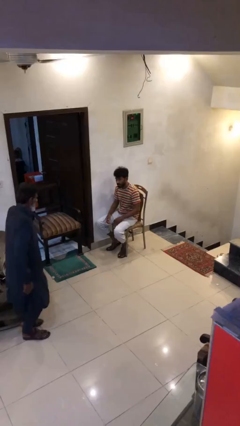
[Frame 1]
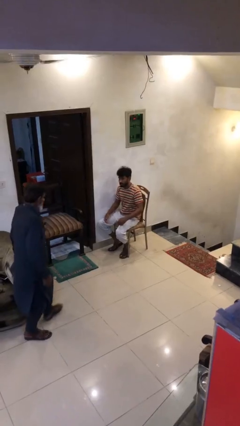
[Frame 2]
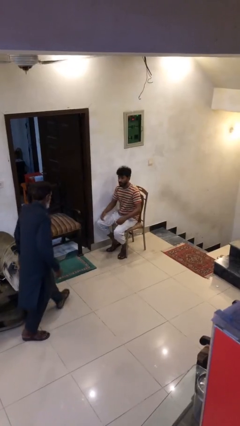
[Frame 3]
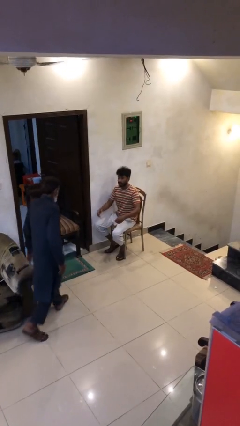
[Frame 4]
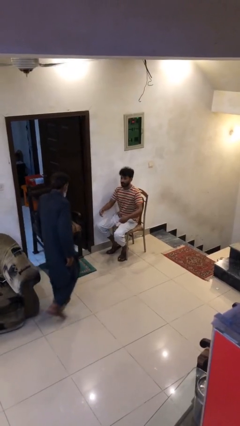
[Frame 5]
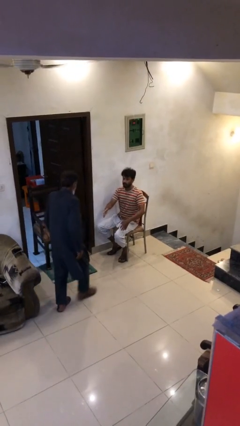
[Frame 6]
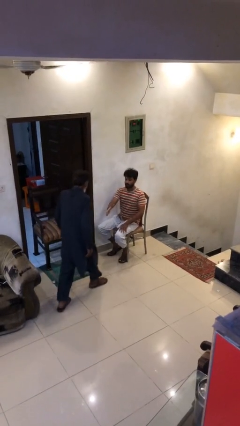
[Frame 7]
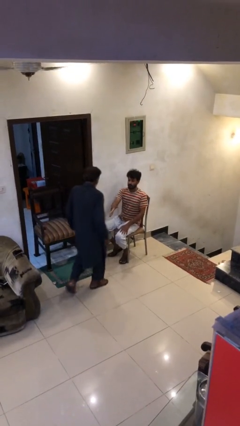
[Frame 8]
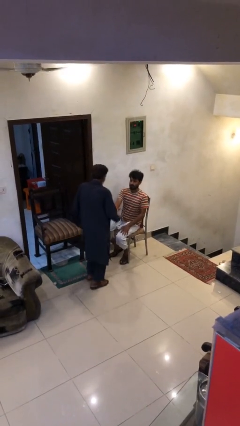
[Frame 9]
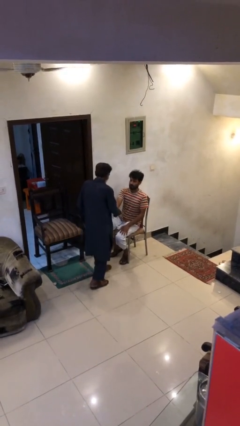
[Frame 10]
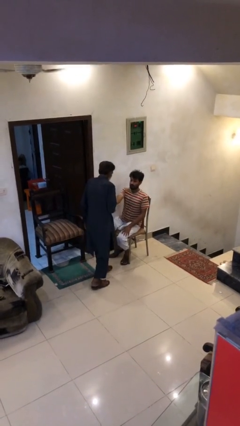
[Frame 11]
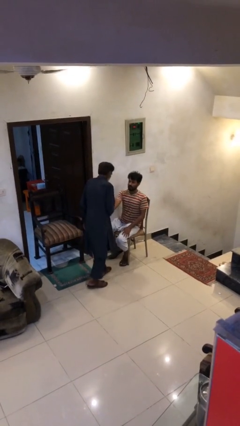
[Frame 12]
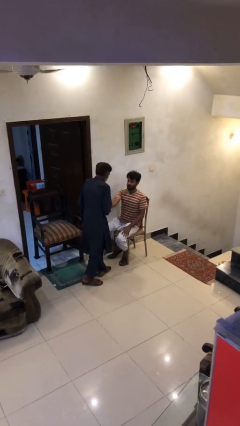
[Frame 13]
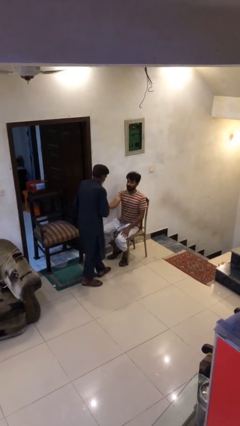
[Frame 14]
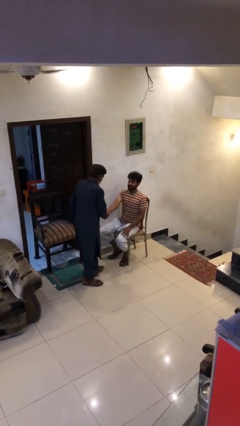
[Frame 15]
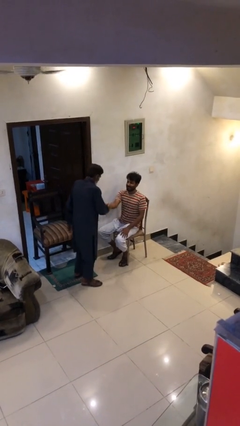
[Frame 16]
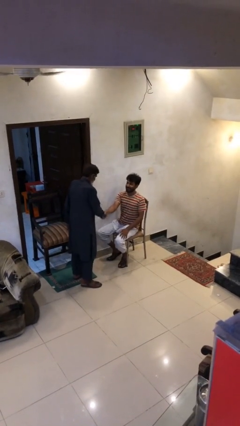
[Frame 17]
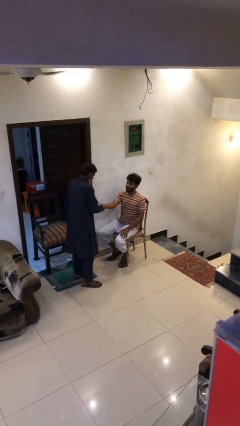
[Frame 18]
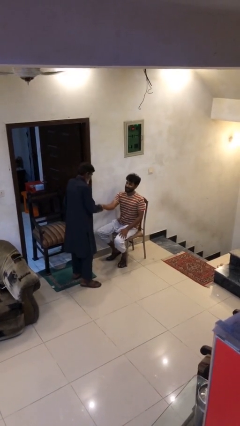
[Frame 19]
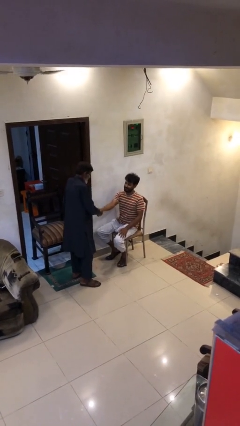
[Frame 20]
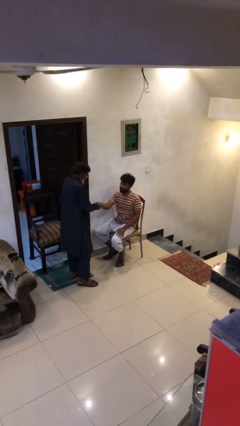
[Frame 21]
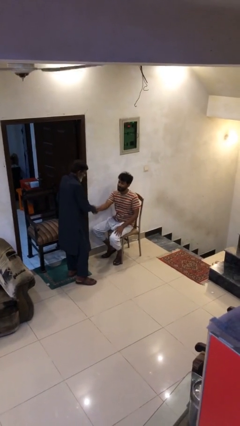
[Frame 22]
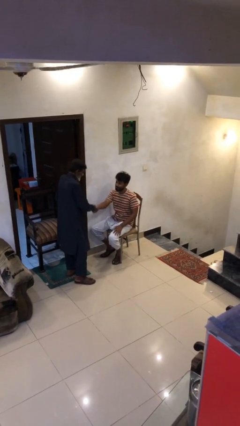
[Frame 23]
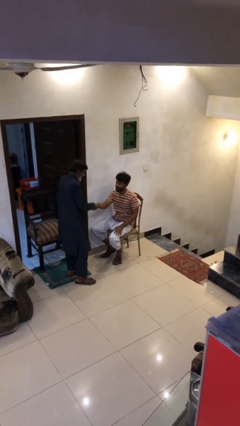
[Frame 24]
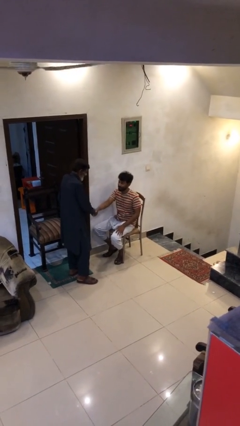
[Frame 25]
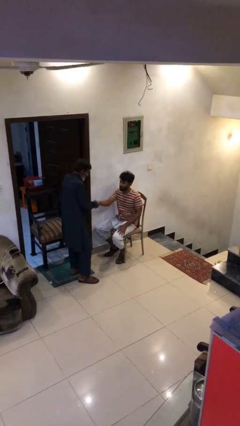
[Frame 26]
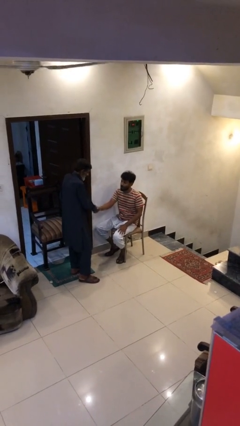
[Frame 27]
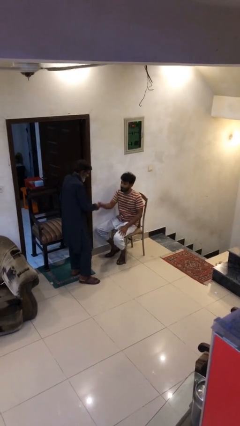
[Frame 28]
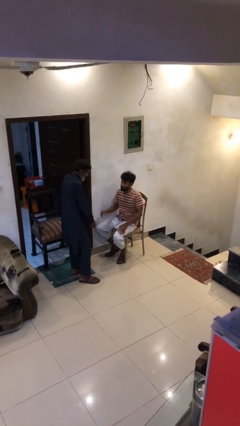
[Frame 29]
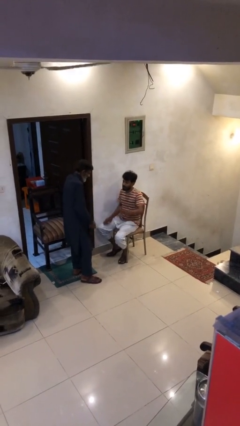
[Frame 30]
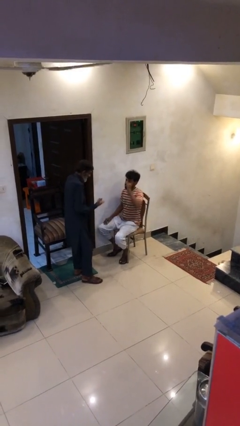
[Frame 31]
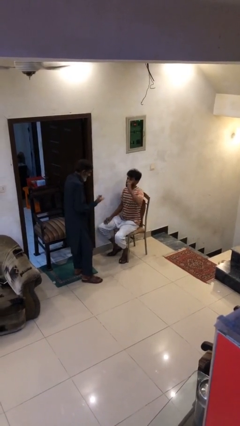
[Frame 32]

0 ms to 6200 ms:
person shakes hand

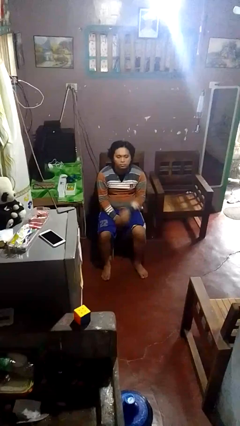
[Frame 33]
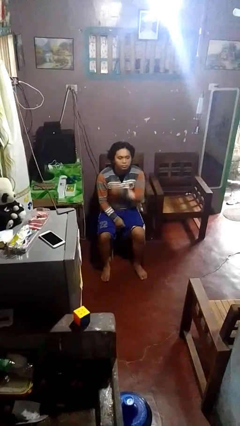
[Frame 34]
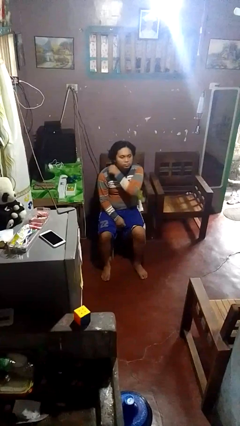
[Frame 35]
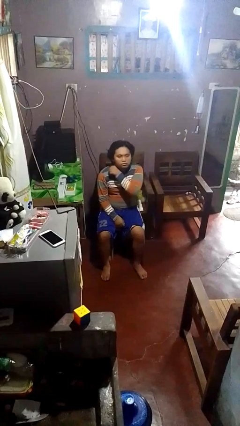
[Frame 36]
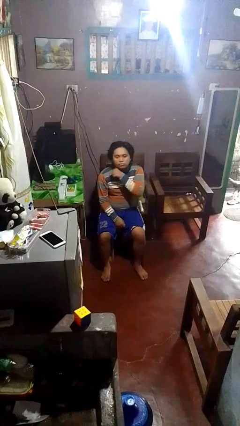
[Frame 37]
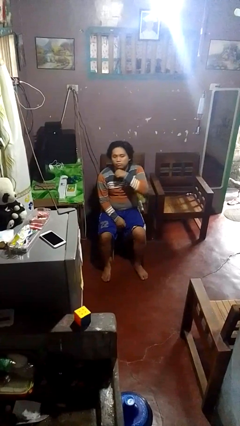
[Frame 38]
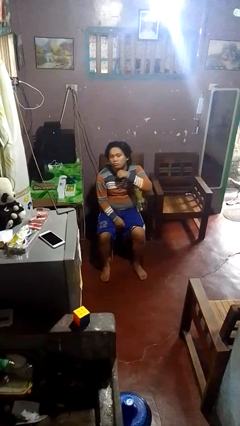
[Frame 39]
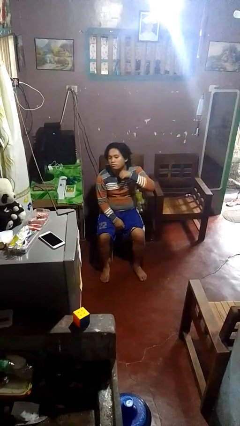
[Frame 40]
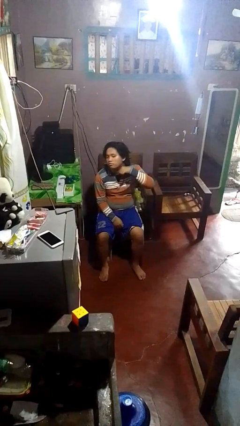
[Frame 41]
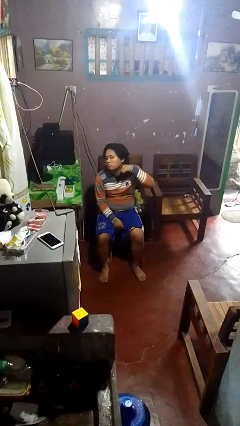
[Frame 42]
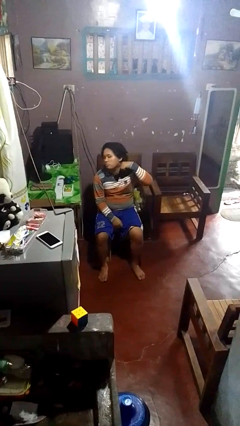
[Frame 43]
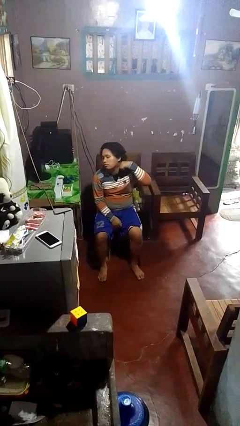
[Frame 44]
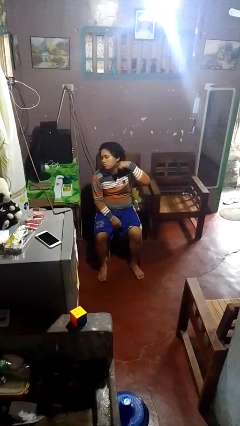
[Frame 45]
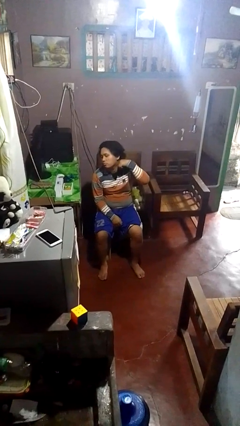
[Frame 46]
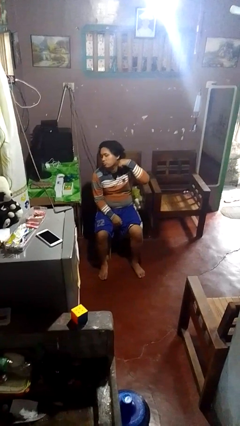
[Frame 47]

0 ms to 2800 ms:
person gestures cut

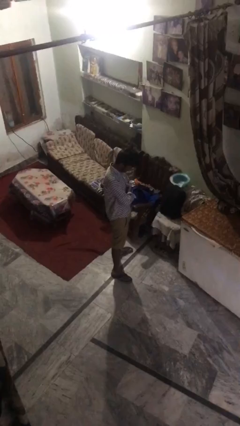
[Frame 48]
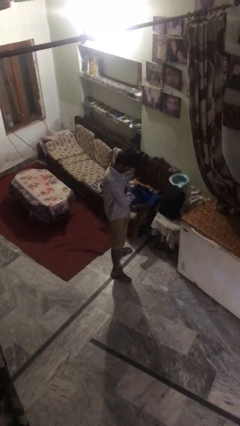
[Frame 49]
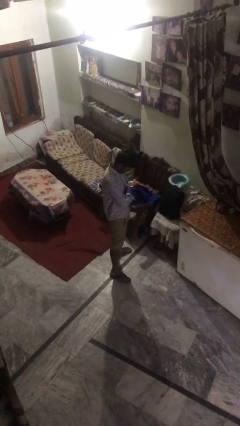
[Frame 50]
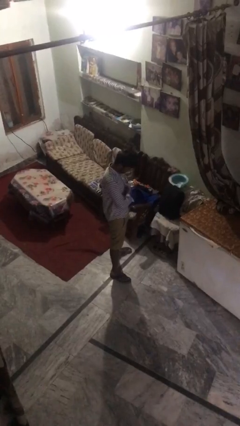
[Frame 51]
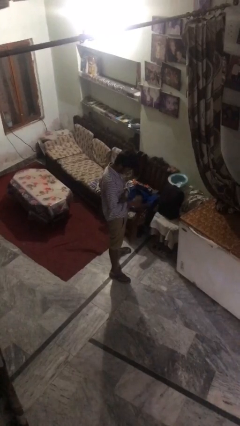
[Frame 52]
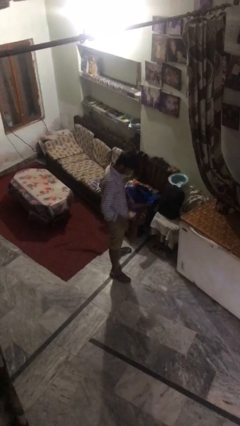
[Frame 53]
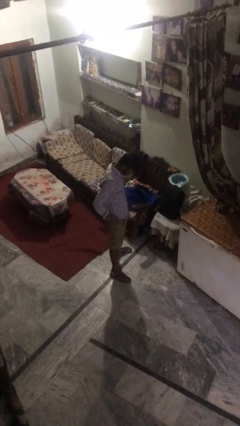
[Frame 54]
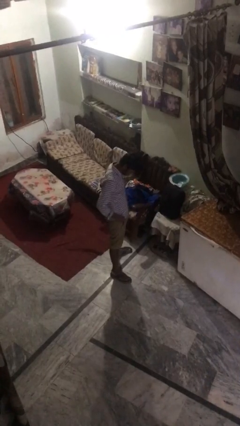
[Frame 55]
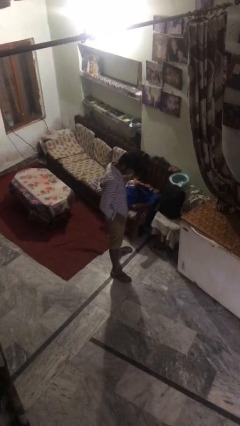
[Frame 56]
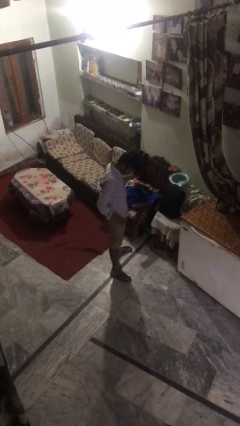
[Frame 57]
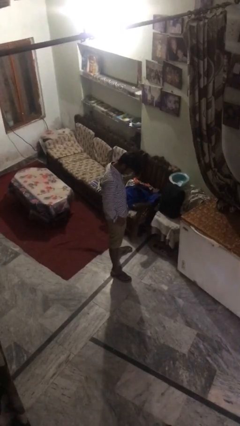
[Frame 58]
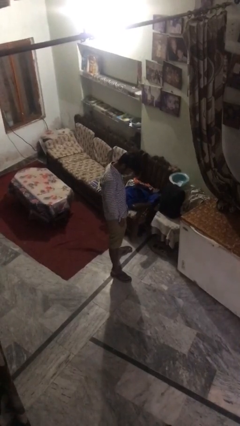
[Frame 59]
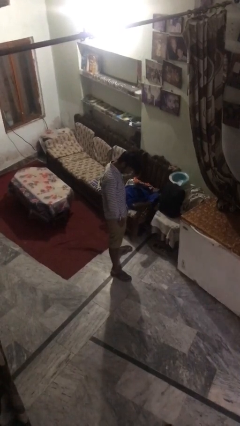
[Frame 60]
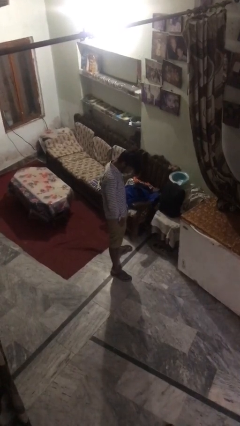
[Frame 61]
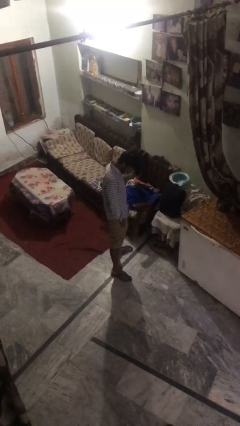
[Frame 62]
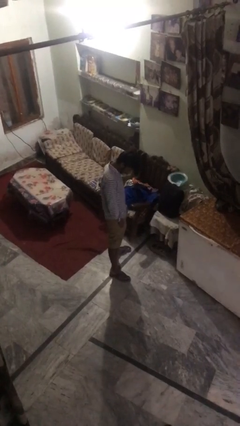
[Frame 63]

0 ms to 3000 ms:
person puts hands in back pockets

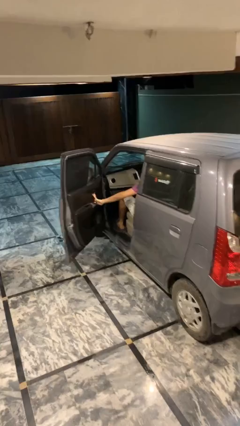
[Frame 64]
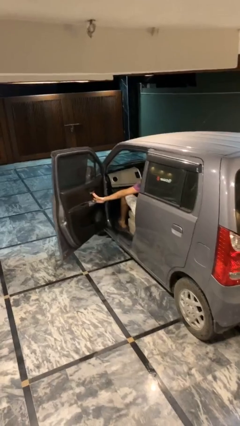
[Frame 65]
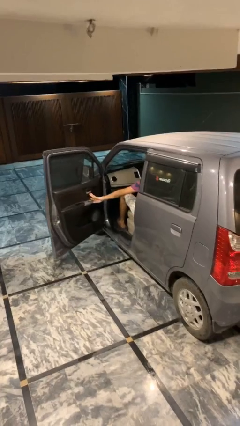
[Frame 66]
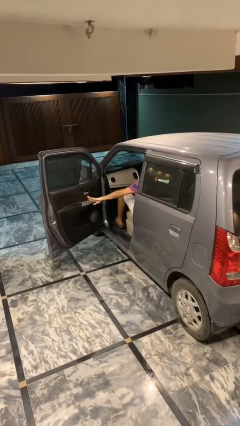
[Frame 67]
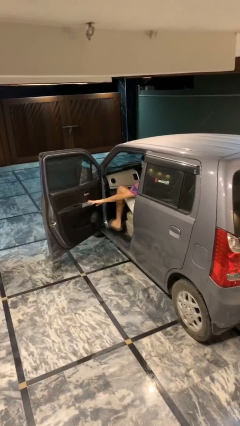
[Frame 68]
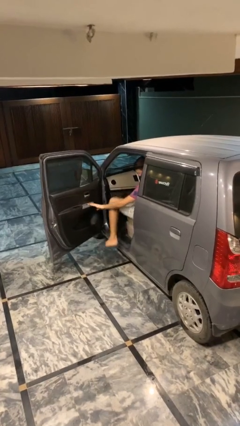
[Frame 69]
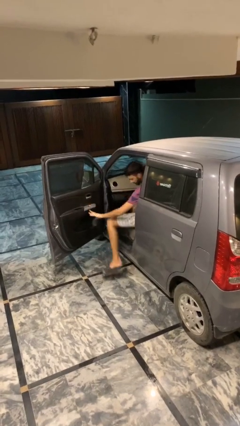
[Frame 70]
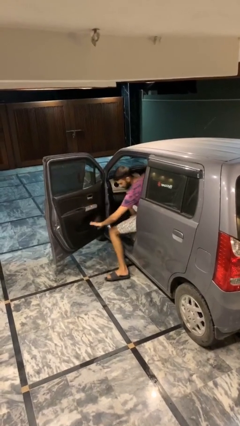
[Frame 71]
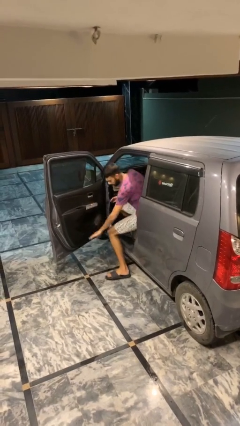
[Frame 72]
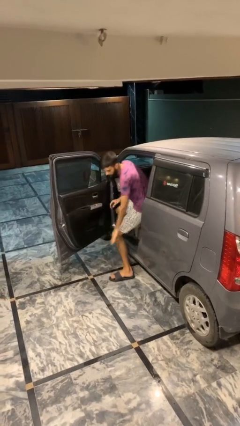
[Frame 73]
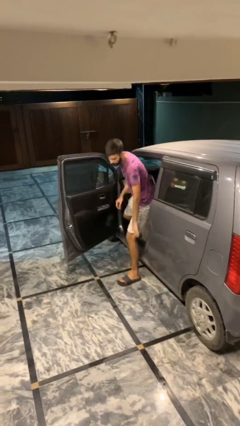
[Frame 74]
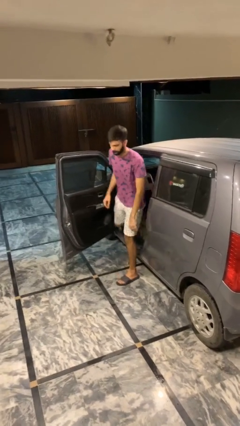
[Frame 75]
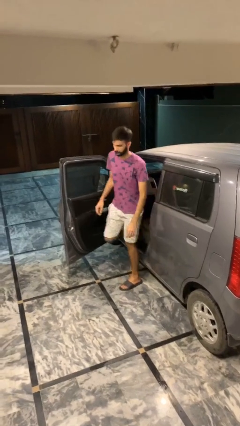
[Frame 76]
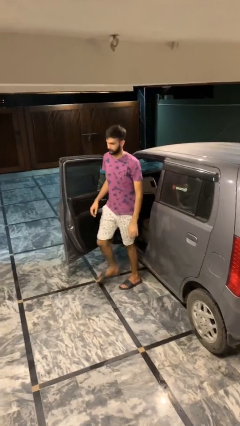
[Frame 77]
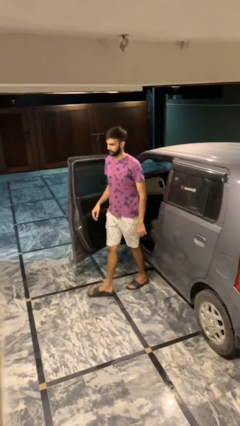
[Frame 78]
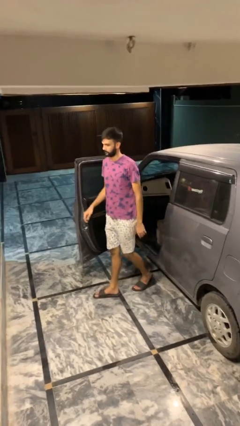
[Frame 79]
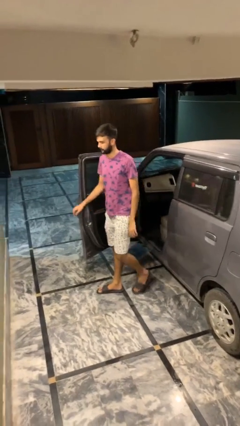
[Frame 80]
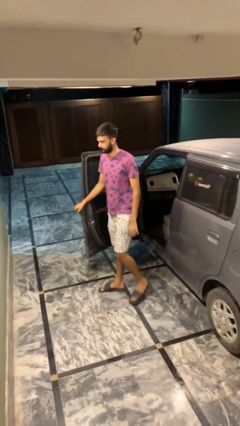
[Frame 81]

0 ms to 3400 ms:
person exits car

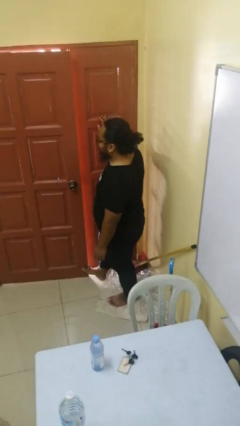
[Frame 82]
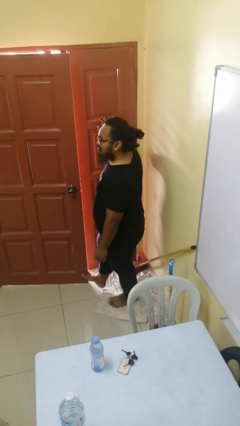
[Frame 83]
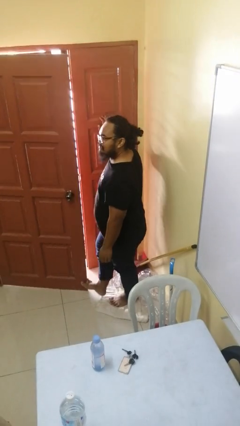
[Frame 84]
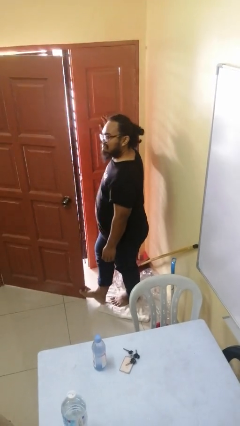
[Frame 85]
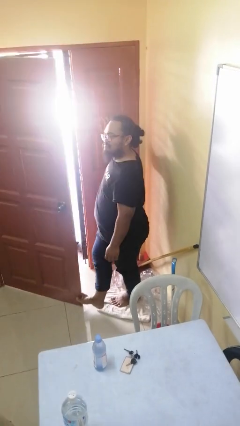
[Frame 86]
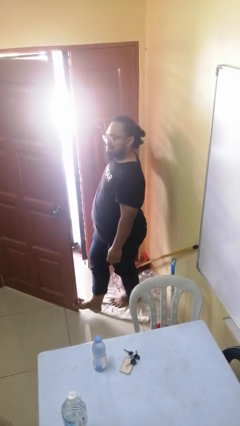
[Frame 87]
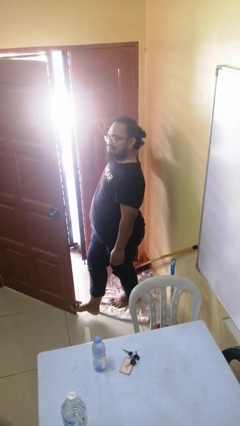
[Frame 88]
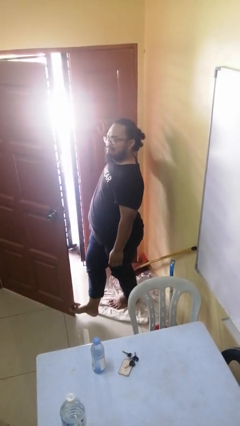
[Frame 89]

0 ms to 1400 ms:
person opens facility door

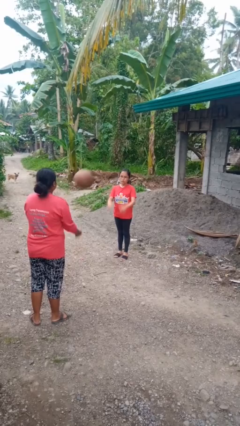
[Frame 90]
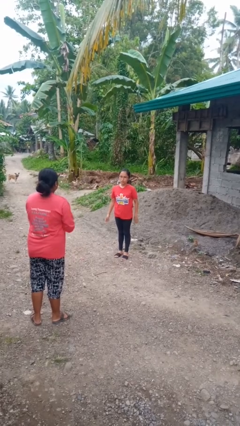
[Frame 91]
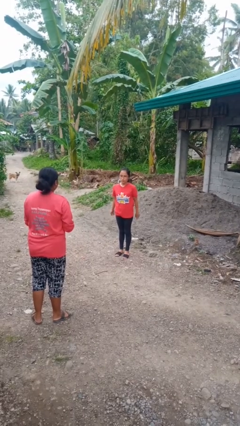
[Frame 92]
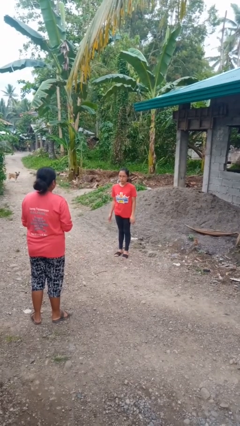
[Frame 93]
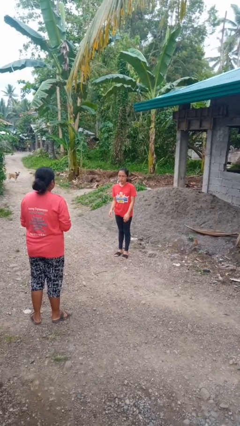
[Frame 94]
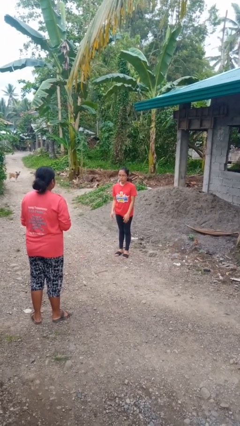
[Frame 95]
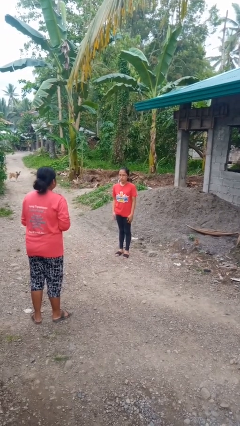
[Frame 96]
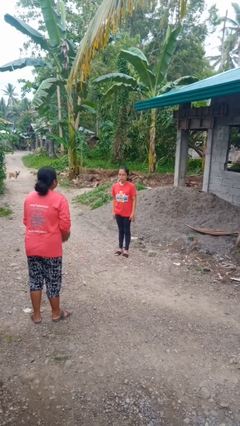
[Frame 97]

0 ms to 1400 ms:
person throws object to person
